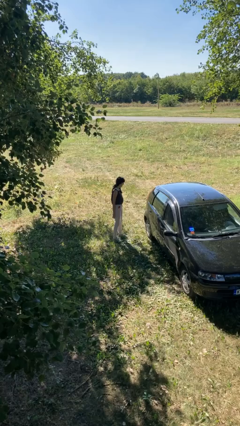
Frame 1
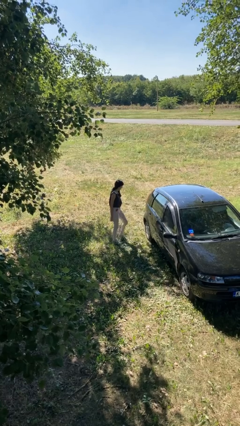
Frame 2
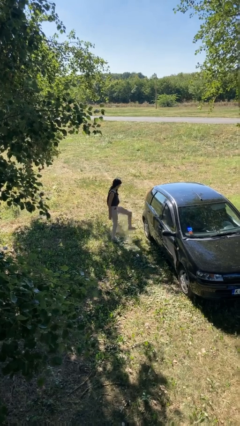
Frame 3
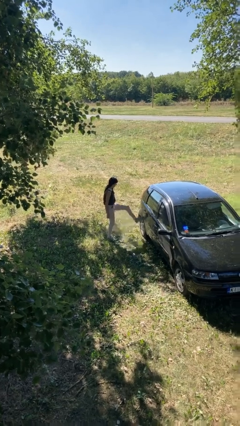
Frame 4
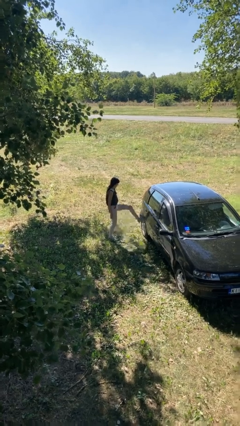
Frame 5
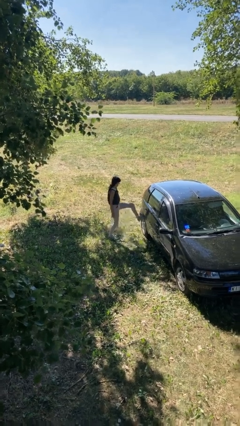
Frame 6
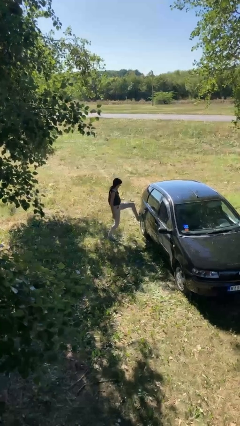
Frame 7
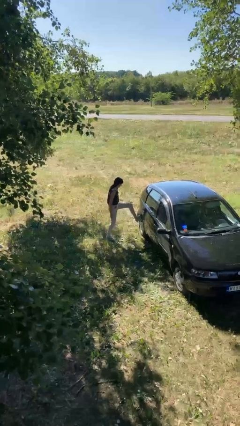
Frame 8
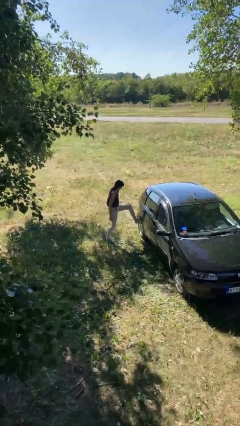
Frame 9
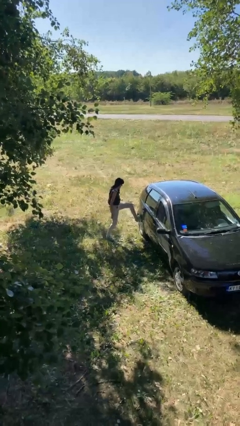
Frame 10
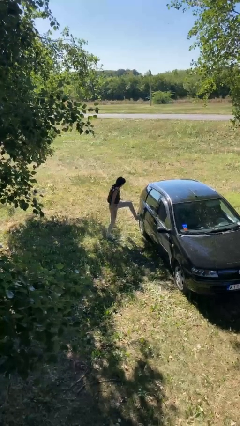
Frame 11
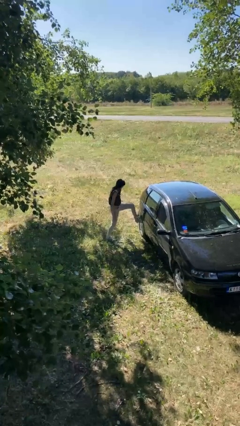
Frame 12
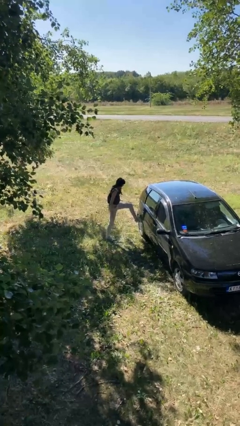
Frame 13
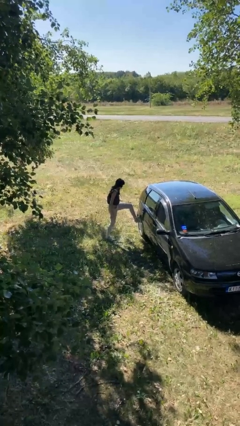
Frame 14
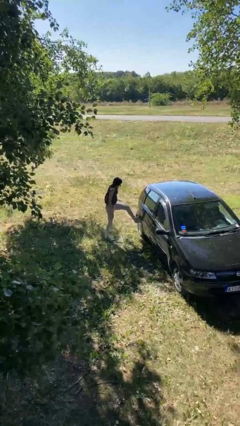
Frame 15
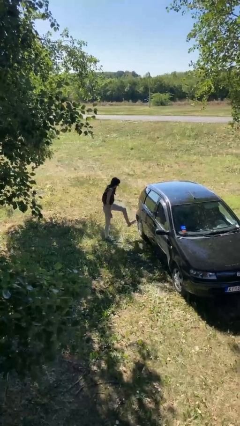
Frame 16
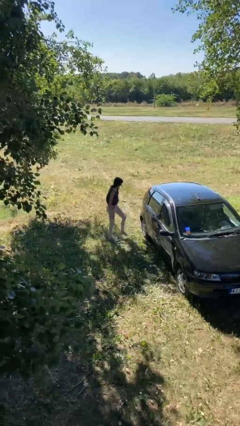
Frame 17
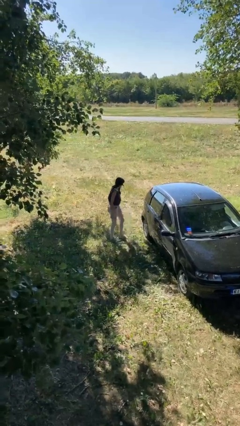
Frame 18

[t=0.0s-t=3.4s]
person kicks car tires

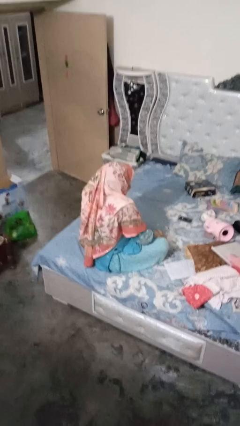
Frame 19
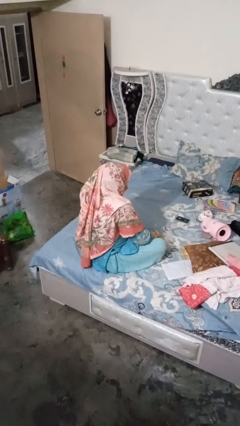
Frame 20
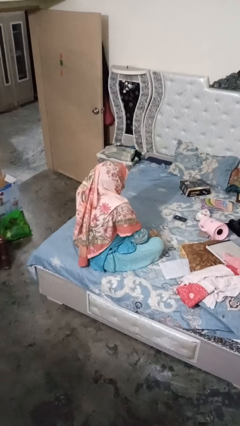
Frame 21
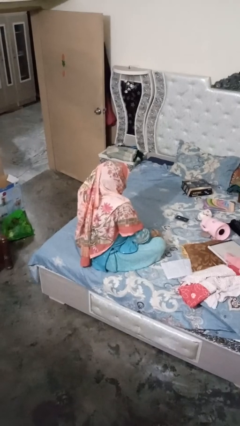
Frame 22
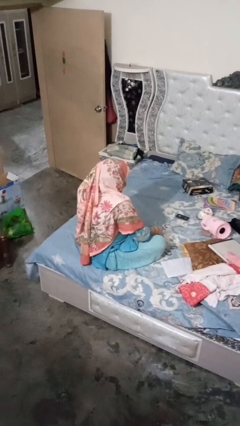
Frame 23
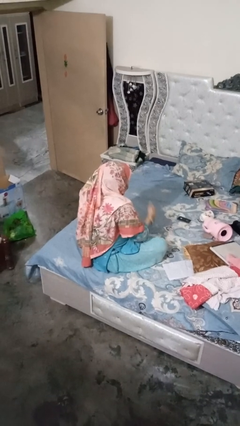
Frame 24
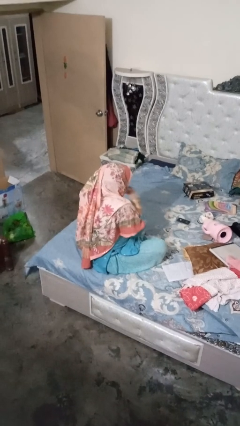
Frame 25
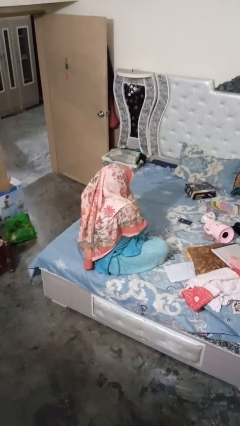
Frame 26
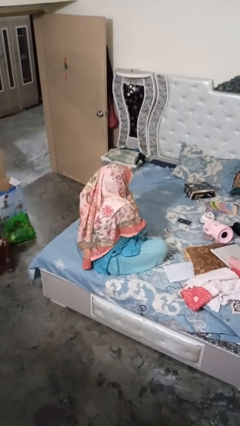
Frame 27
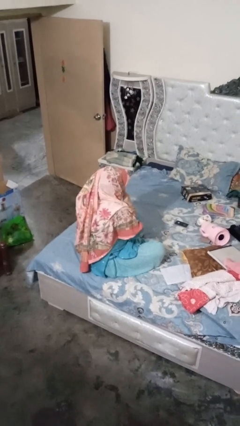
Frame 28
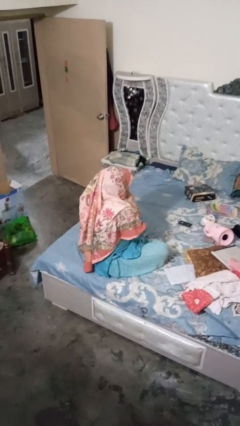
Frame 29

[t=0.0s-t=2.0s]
person strokes chin

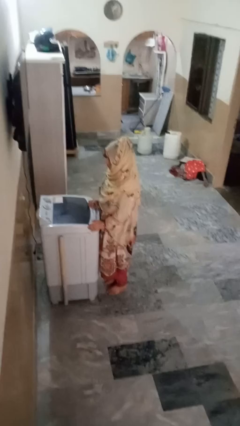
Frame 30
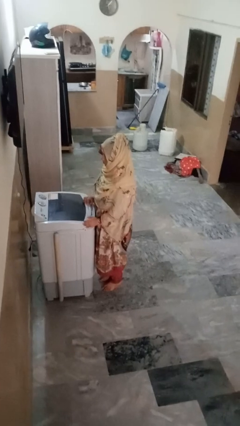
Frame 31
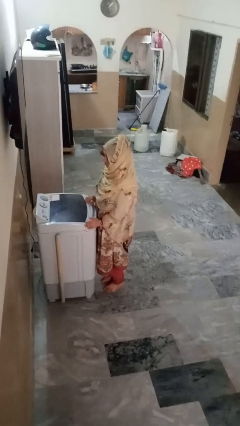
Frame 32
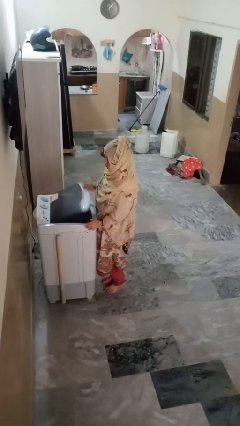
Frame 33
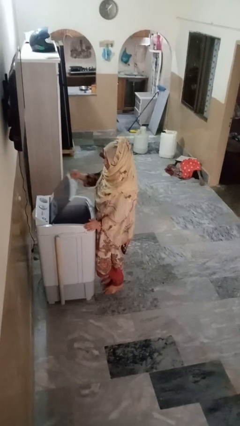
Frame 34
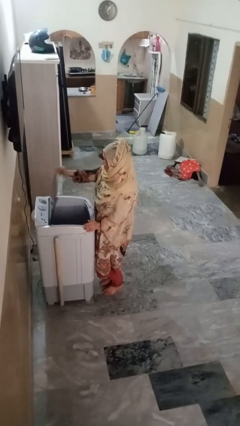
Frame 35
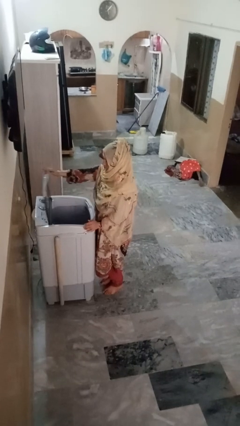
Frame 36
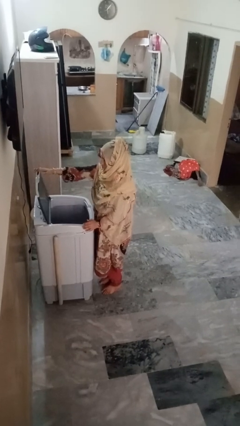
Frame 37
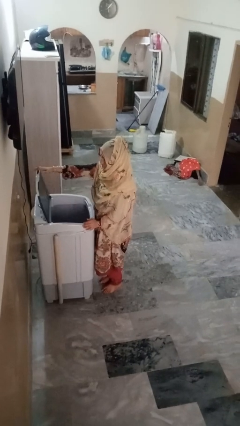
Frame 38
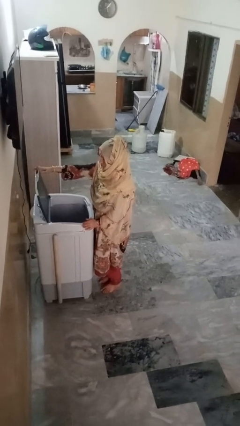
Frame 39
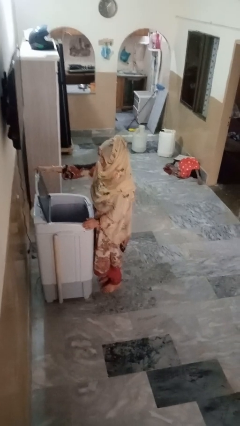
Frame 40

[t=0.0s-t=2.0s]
person opens clothes washer

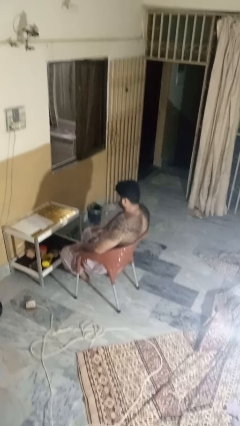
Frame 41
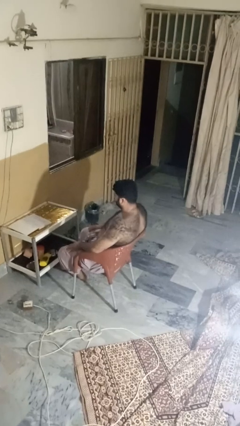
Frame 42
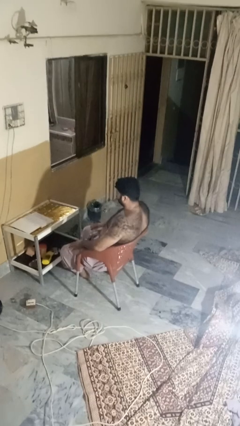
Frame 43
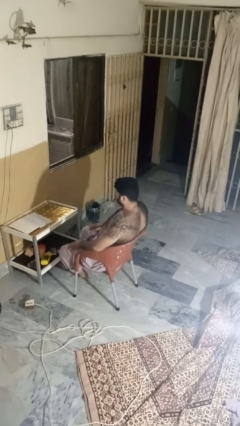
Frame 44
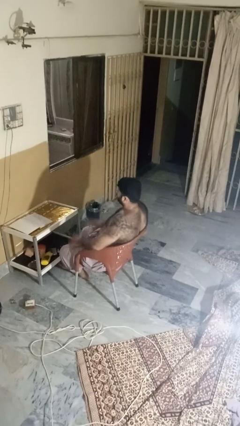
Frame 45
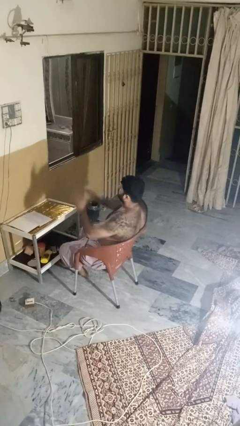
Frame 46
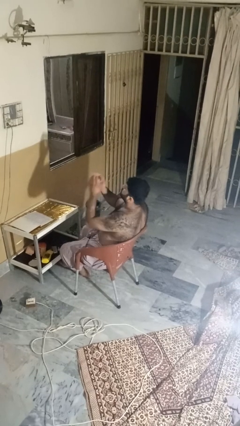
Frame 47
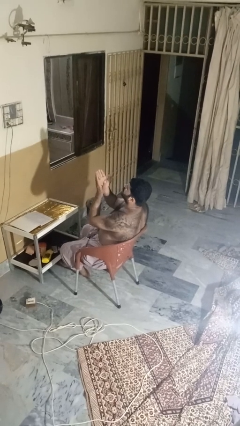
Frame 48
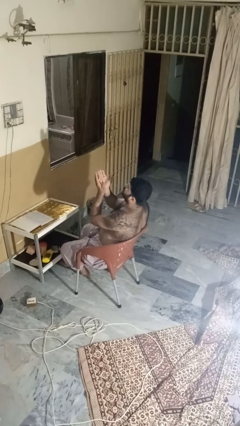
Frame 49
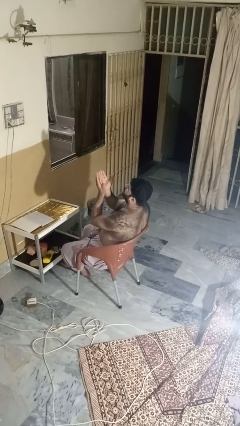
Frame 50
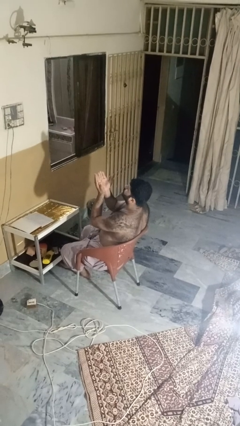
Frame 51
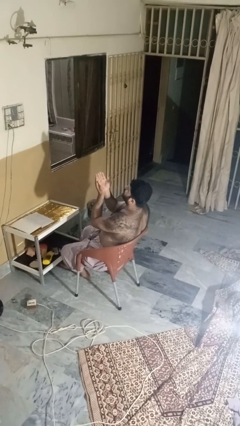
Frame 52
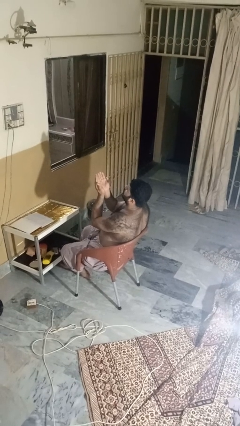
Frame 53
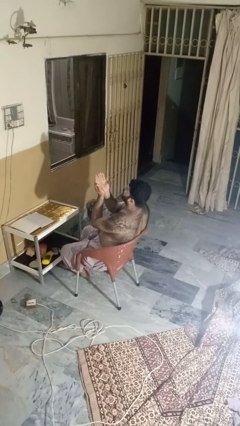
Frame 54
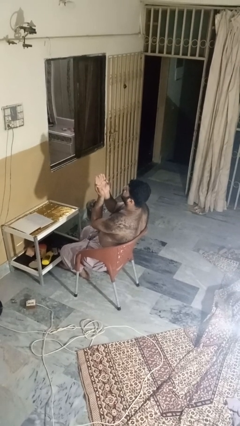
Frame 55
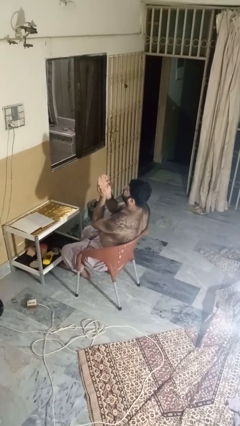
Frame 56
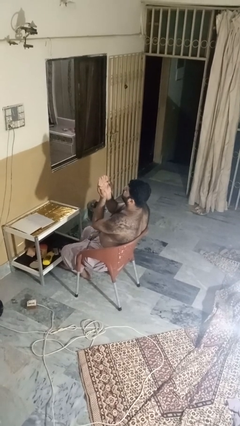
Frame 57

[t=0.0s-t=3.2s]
person prays

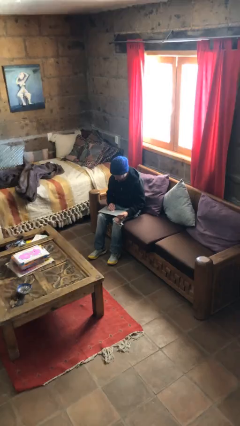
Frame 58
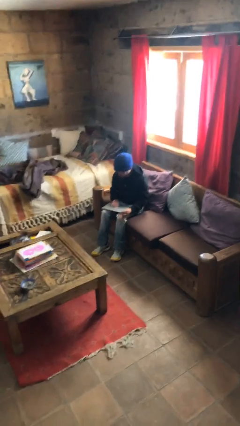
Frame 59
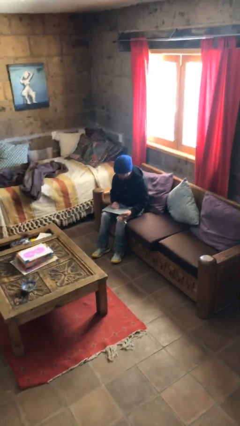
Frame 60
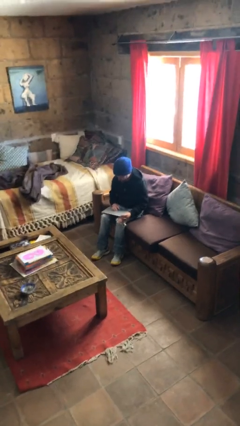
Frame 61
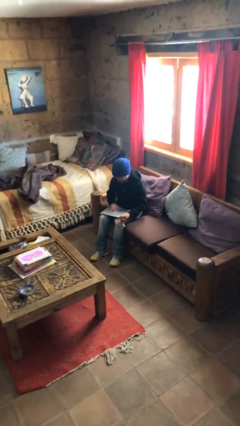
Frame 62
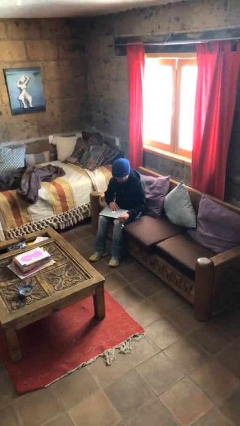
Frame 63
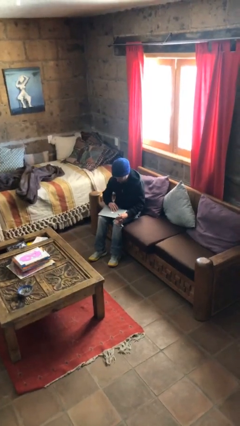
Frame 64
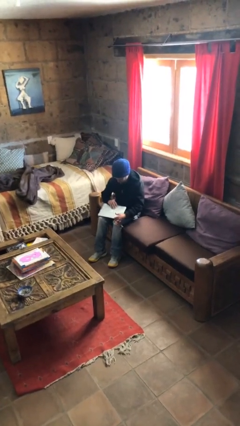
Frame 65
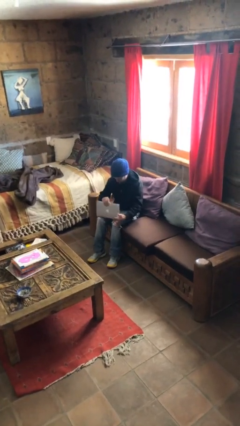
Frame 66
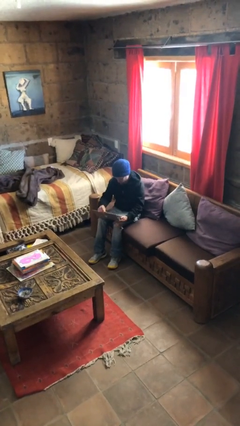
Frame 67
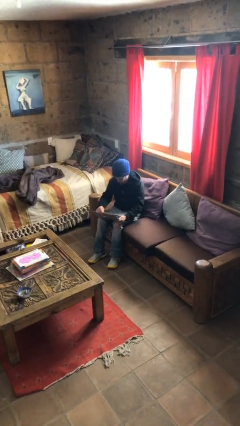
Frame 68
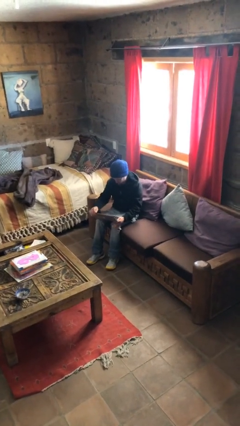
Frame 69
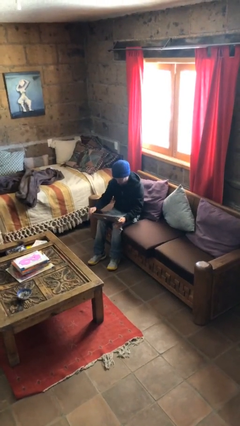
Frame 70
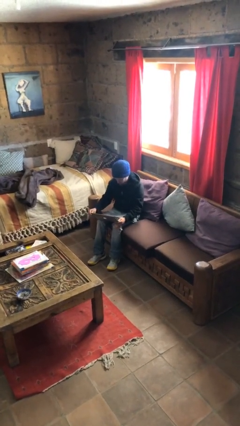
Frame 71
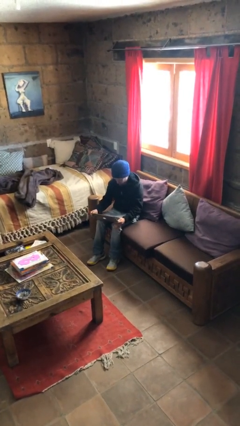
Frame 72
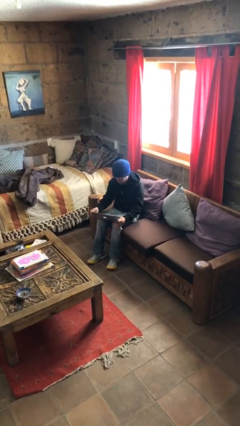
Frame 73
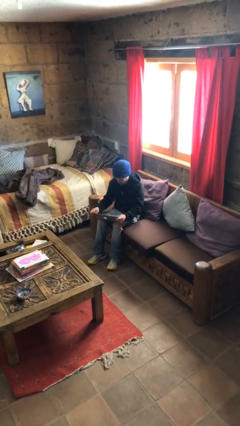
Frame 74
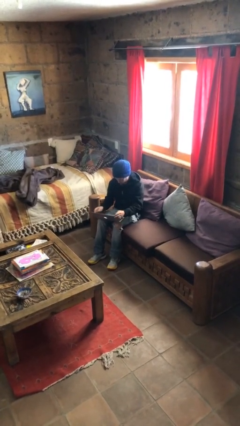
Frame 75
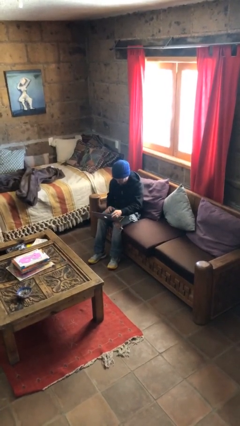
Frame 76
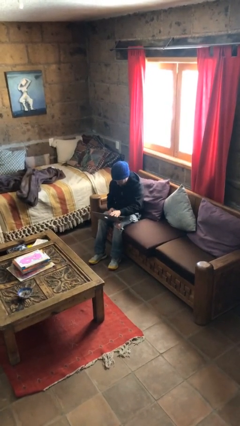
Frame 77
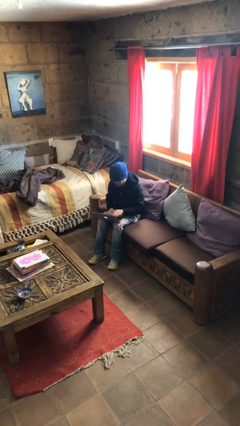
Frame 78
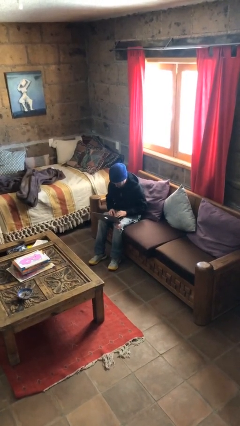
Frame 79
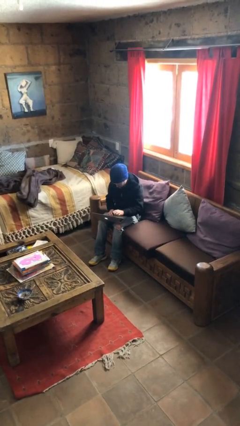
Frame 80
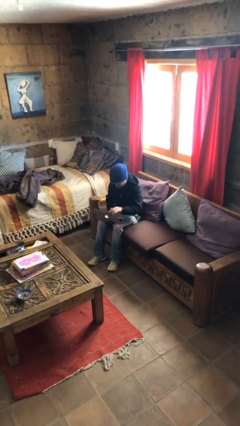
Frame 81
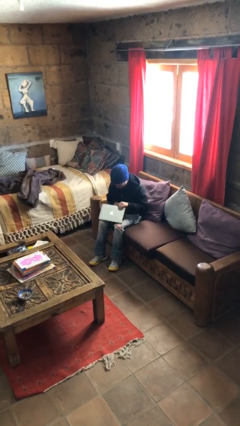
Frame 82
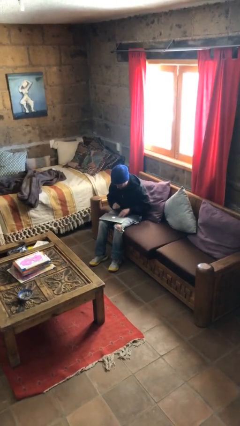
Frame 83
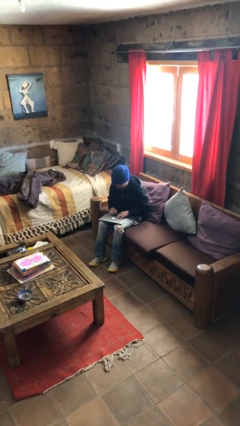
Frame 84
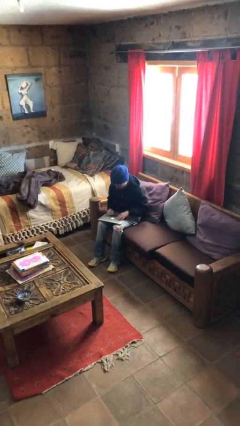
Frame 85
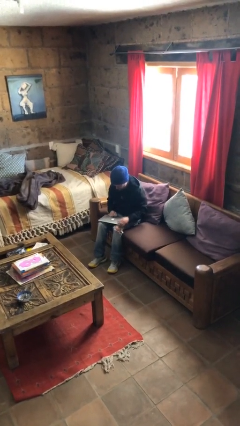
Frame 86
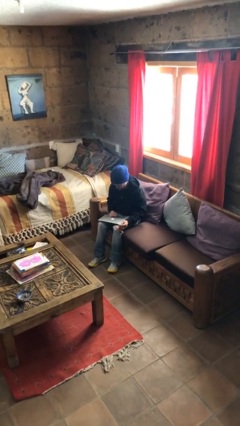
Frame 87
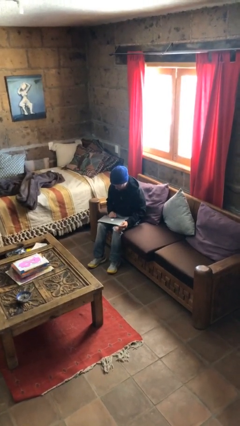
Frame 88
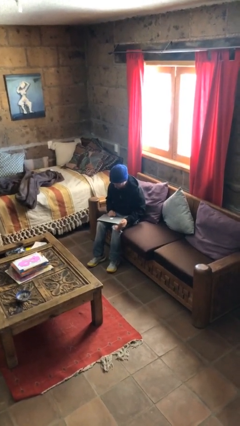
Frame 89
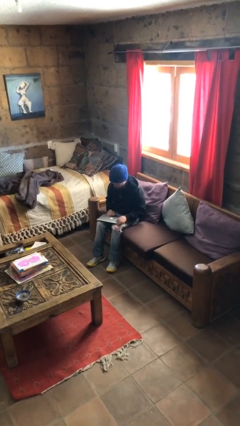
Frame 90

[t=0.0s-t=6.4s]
person interacts with laptop

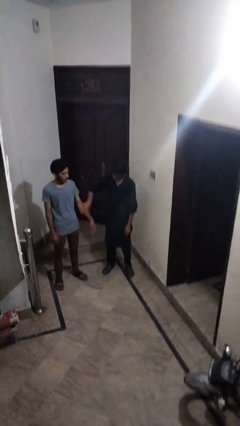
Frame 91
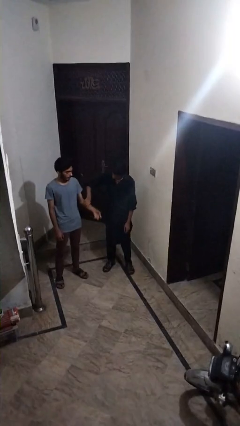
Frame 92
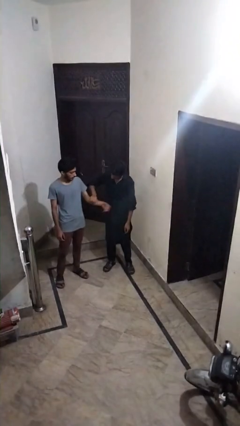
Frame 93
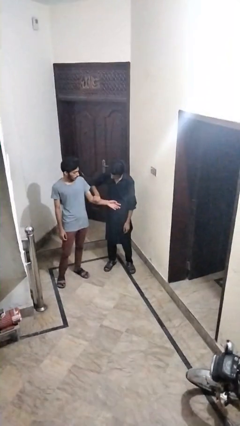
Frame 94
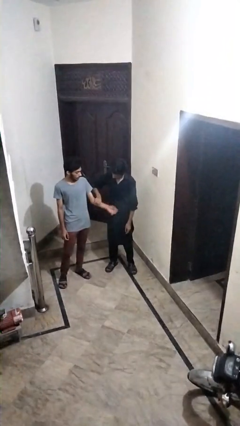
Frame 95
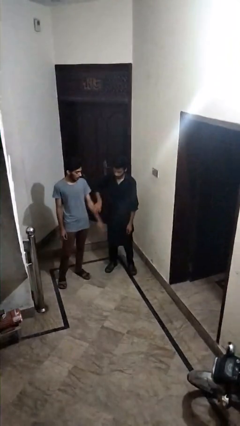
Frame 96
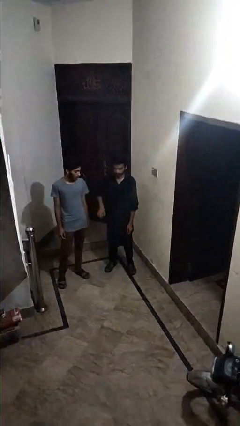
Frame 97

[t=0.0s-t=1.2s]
person grabs person by forearm
